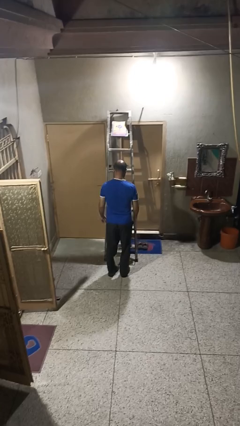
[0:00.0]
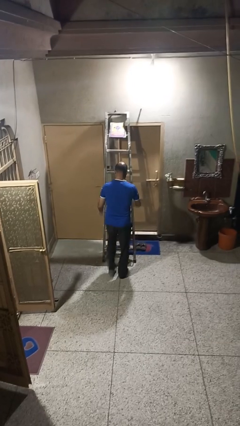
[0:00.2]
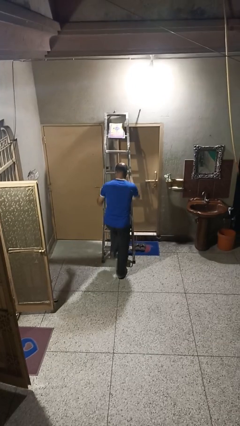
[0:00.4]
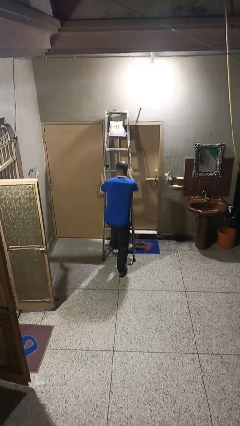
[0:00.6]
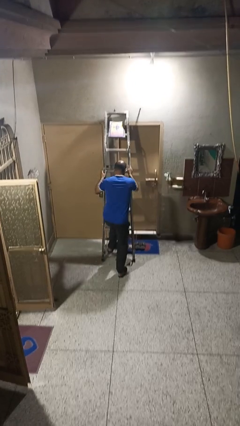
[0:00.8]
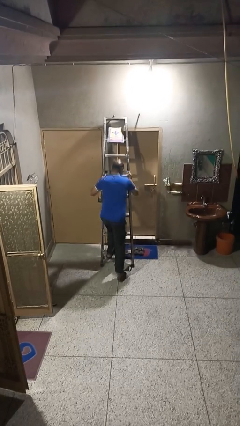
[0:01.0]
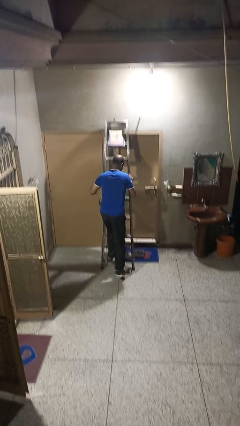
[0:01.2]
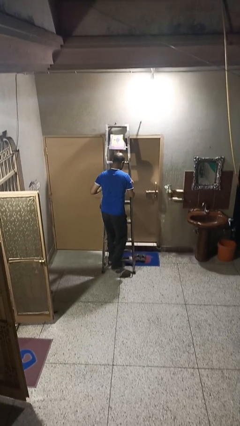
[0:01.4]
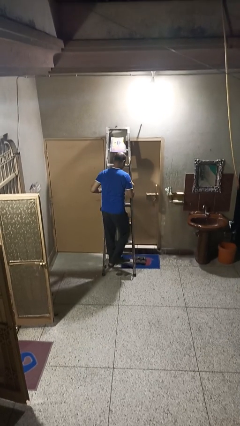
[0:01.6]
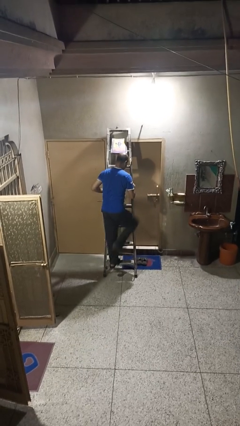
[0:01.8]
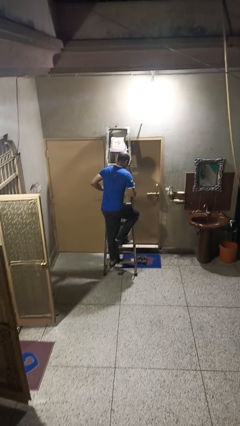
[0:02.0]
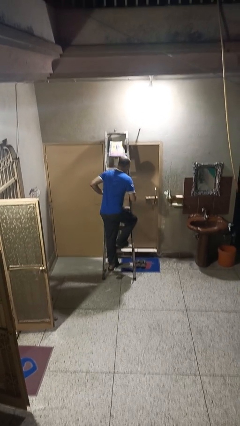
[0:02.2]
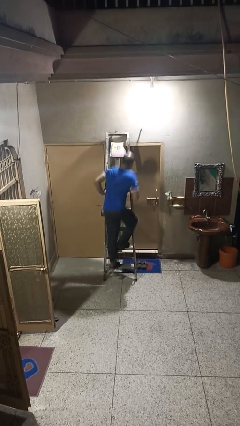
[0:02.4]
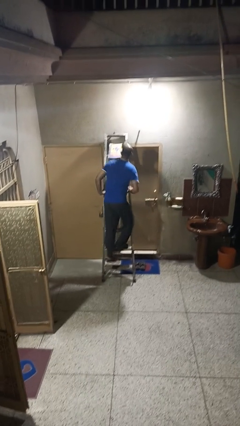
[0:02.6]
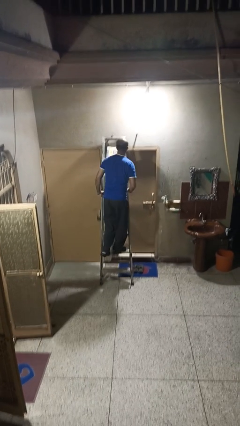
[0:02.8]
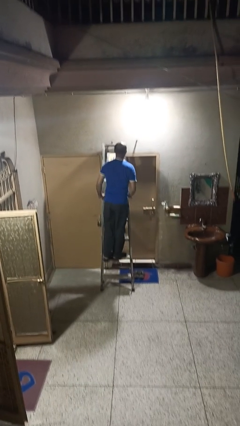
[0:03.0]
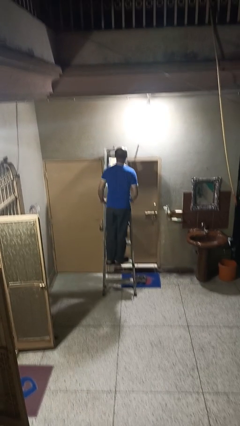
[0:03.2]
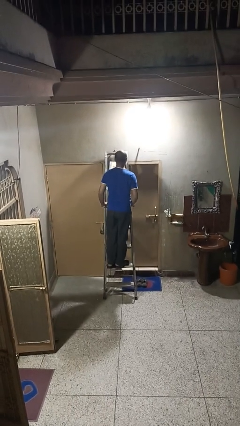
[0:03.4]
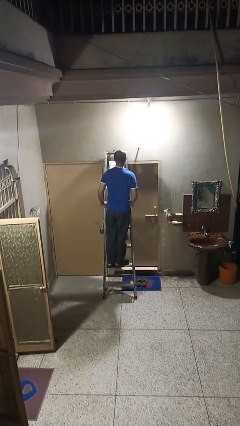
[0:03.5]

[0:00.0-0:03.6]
person climbs up ladder

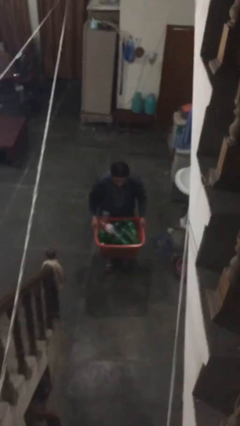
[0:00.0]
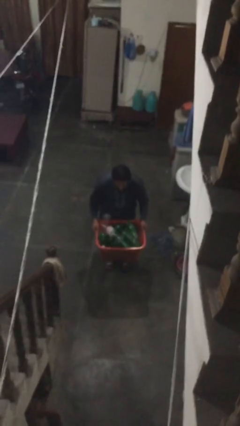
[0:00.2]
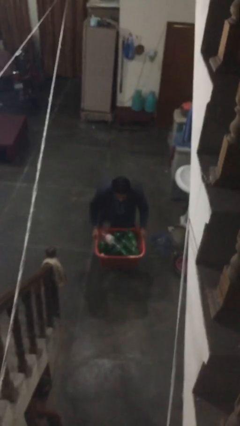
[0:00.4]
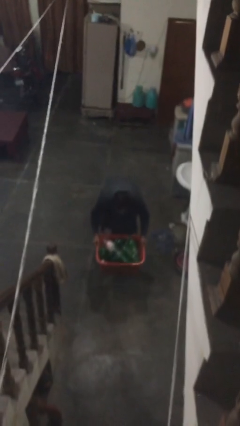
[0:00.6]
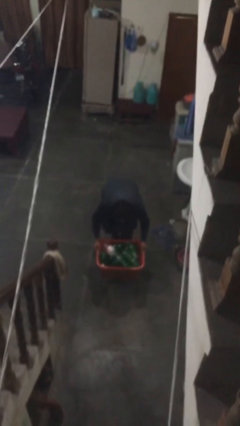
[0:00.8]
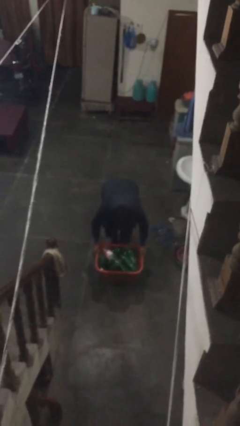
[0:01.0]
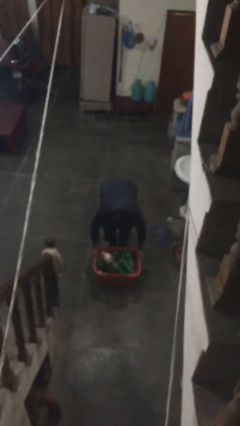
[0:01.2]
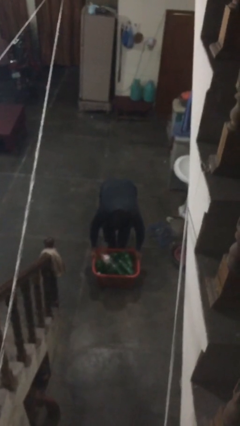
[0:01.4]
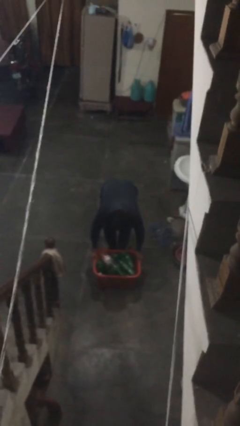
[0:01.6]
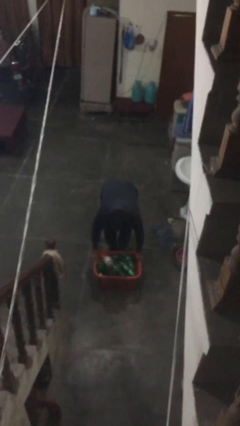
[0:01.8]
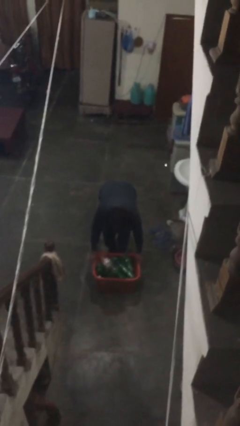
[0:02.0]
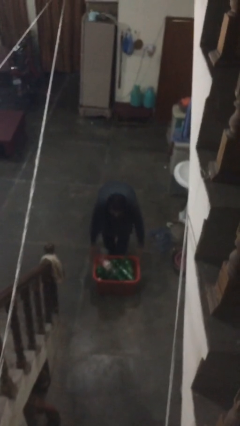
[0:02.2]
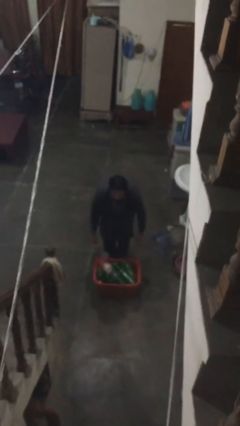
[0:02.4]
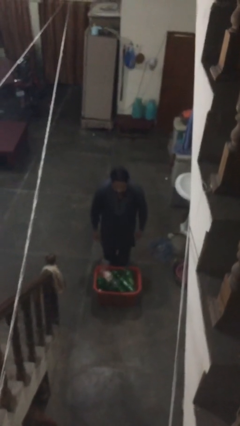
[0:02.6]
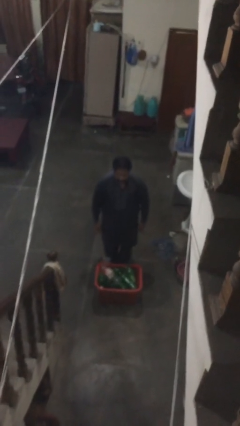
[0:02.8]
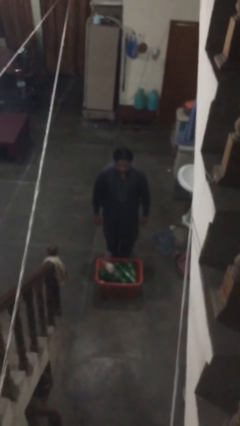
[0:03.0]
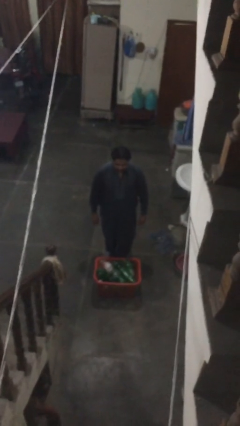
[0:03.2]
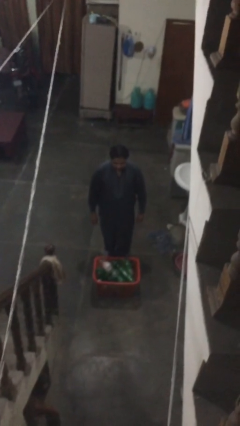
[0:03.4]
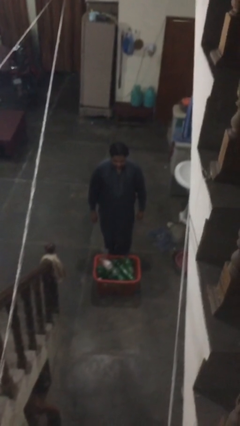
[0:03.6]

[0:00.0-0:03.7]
person puts down object on floor

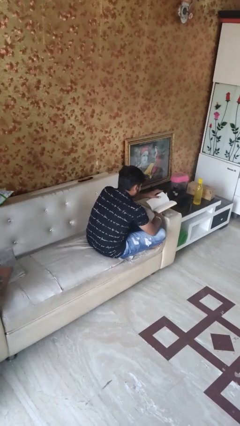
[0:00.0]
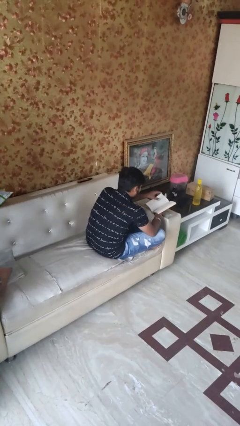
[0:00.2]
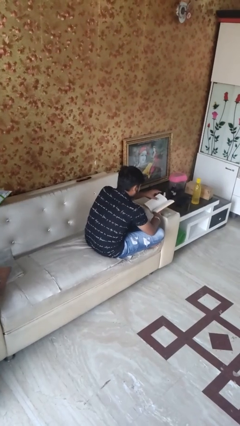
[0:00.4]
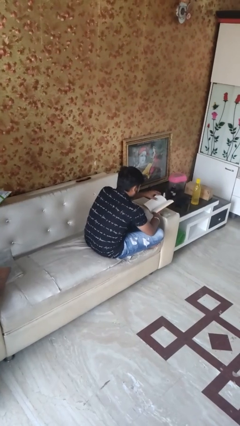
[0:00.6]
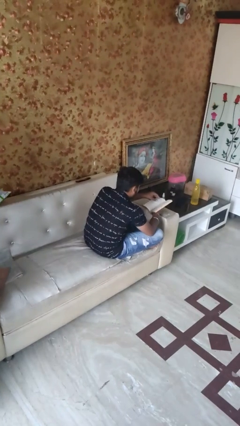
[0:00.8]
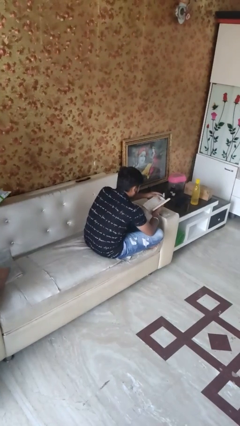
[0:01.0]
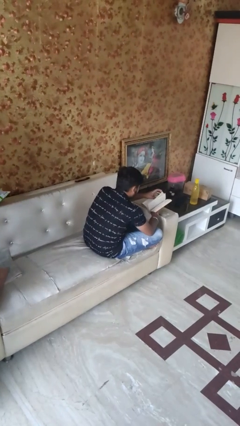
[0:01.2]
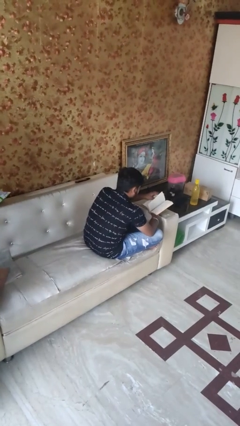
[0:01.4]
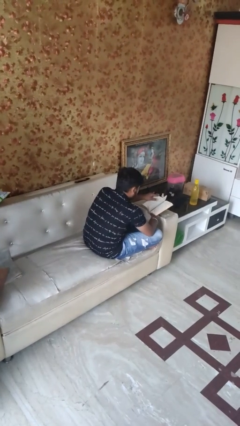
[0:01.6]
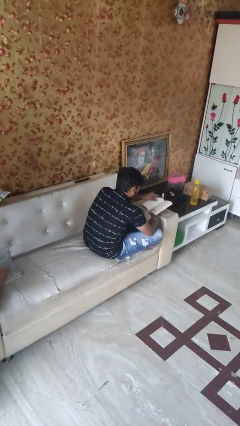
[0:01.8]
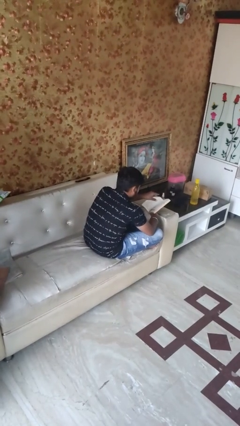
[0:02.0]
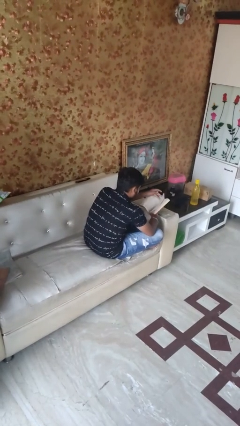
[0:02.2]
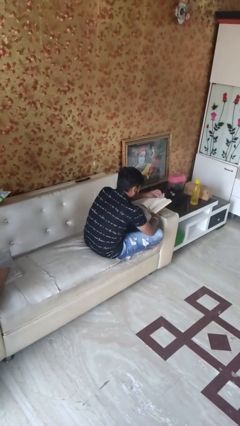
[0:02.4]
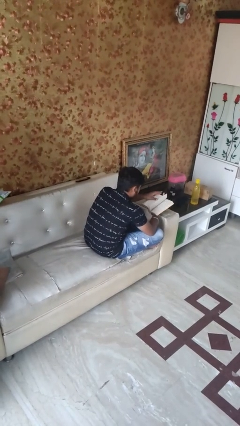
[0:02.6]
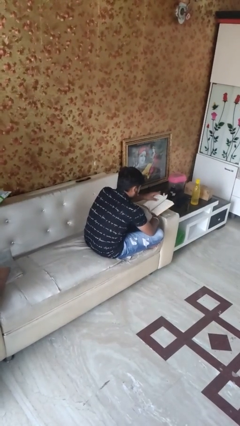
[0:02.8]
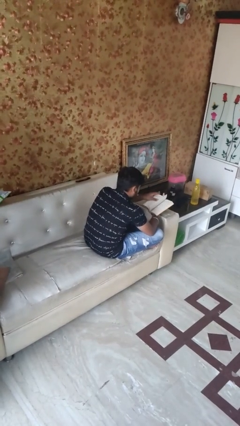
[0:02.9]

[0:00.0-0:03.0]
person reads book

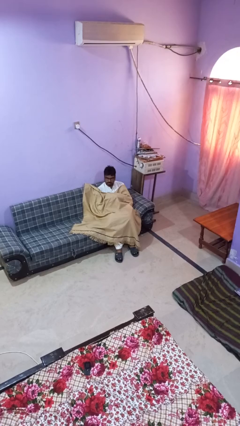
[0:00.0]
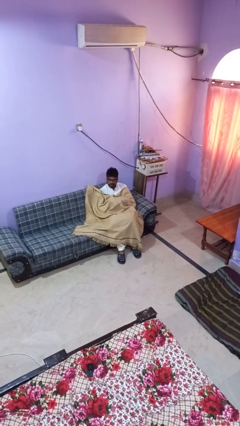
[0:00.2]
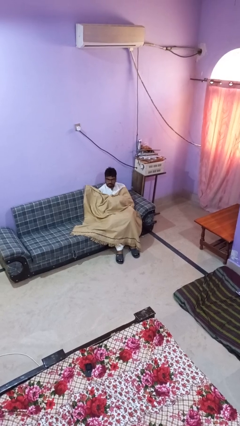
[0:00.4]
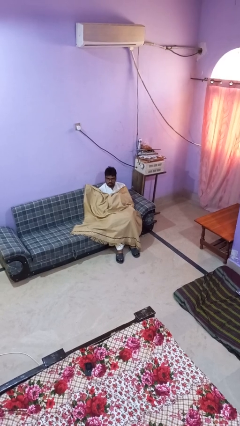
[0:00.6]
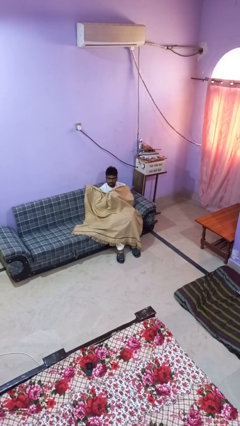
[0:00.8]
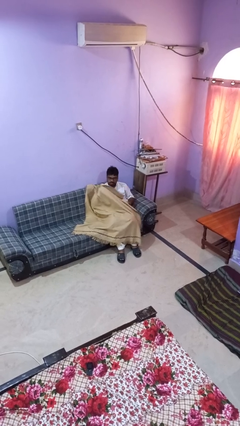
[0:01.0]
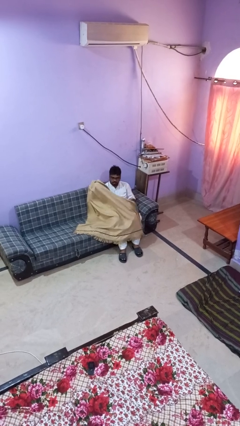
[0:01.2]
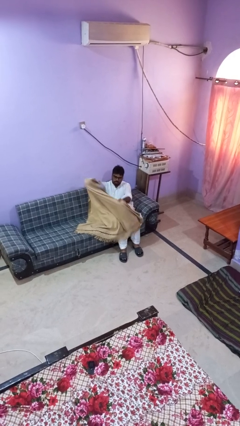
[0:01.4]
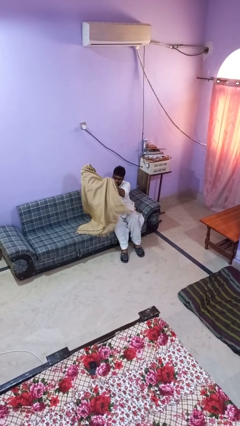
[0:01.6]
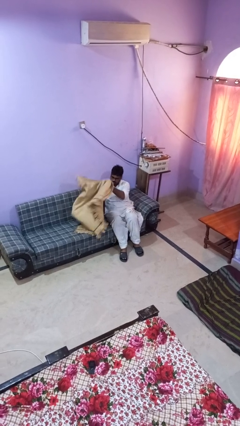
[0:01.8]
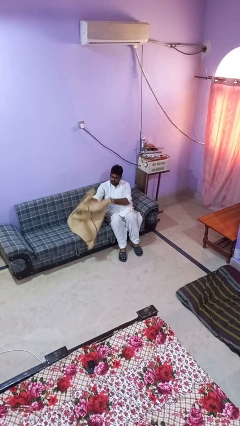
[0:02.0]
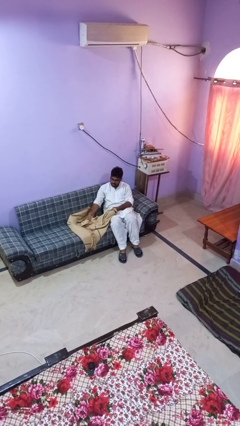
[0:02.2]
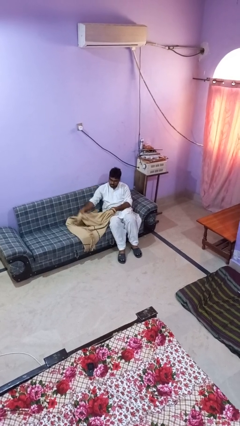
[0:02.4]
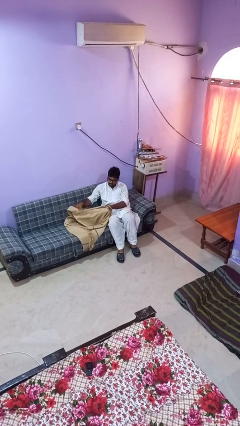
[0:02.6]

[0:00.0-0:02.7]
person uncovers with blanket

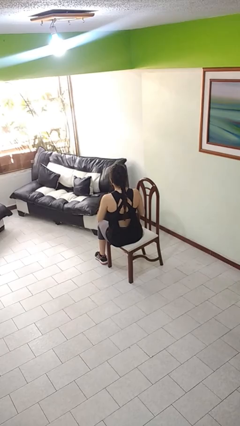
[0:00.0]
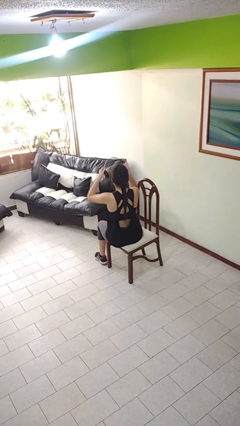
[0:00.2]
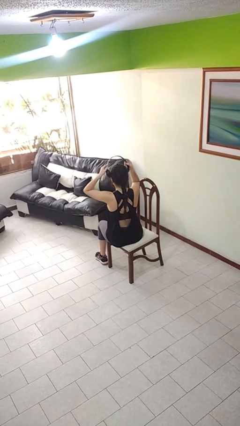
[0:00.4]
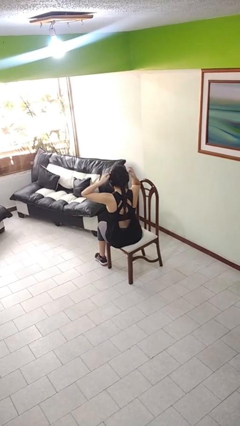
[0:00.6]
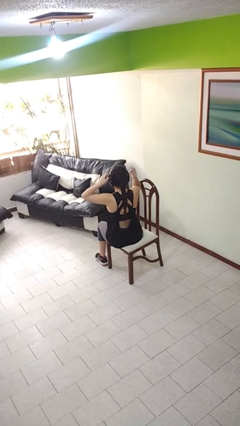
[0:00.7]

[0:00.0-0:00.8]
person puts on headphones

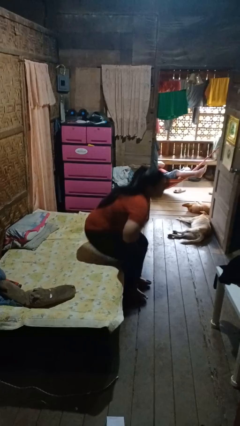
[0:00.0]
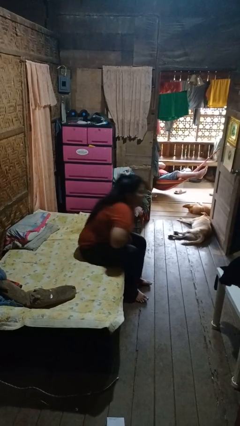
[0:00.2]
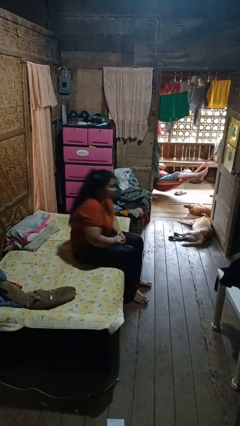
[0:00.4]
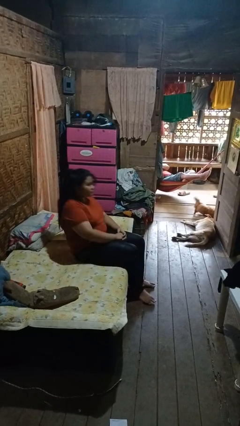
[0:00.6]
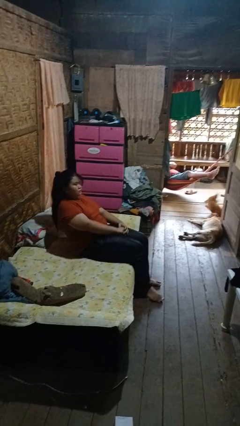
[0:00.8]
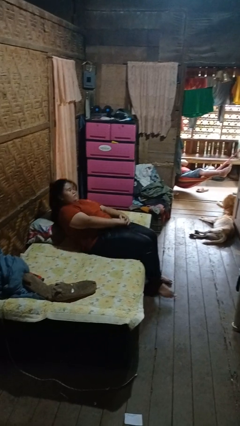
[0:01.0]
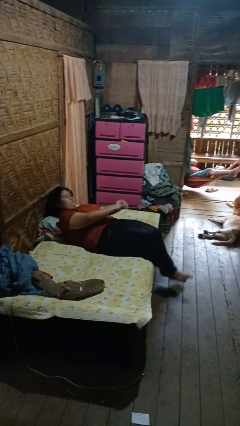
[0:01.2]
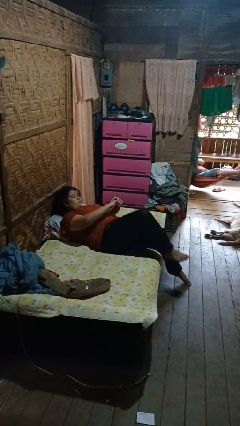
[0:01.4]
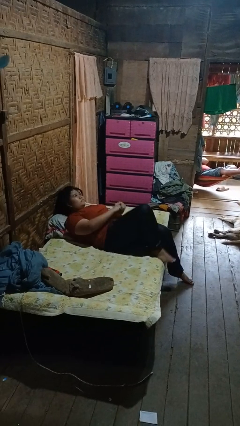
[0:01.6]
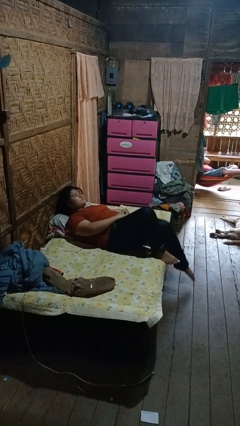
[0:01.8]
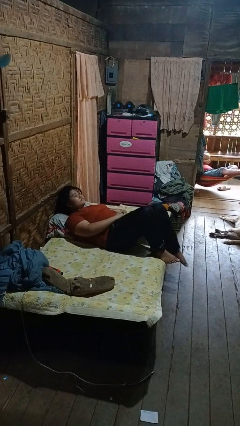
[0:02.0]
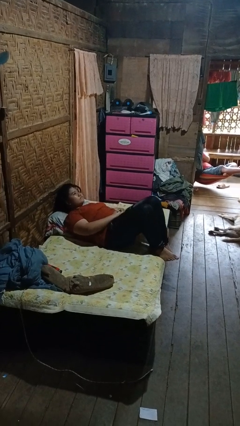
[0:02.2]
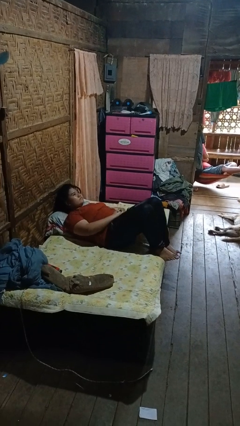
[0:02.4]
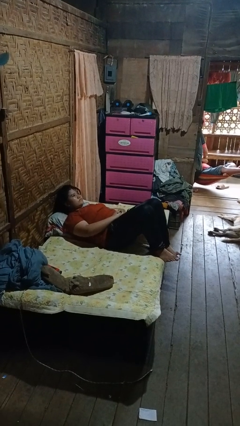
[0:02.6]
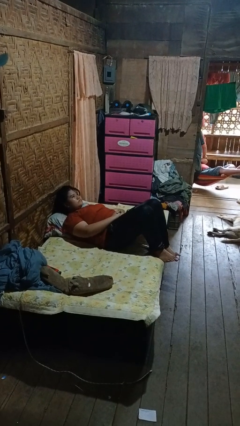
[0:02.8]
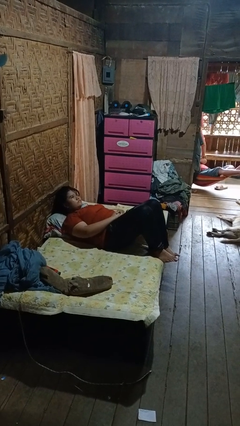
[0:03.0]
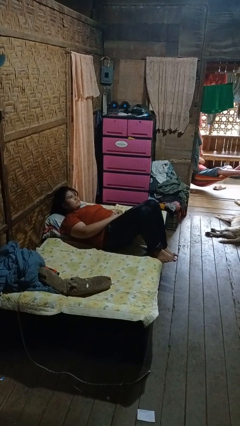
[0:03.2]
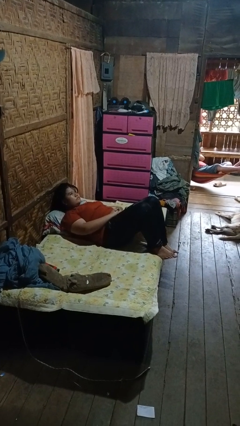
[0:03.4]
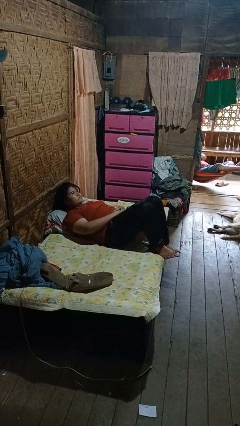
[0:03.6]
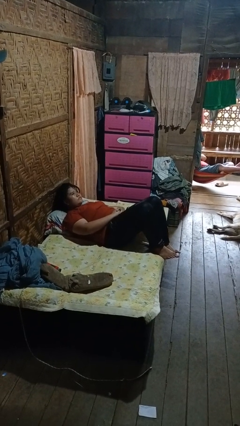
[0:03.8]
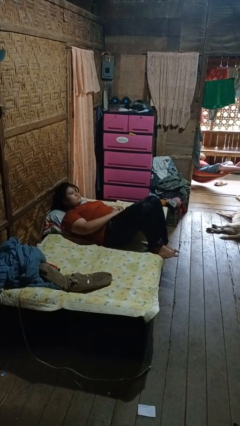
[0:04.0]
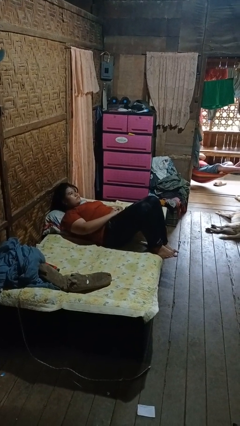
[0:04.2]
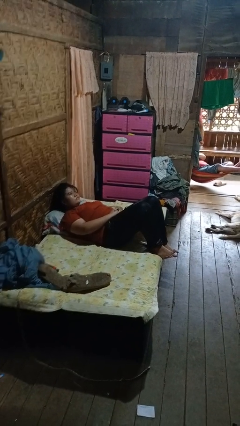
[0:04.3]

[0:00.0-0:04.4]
person lies down on bed
